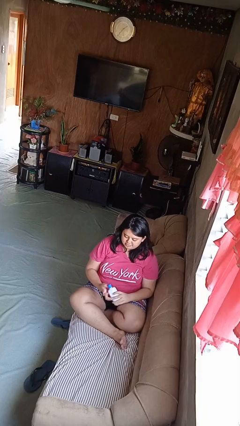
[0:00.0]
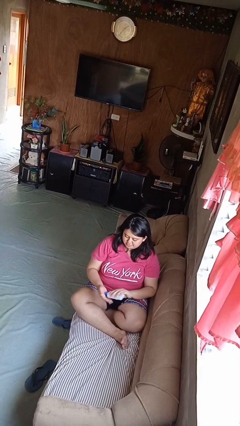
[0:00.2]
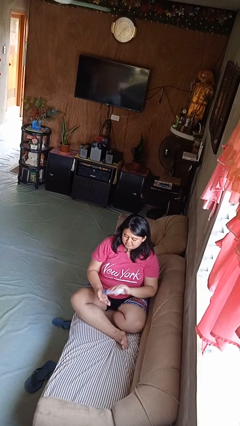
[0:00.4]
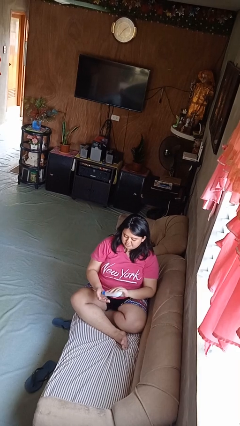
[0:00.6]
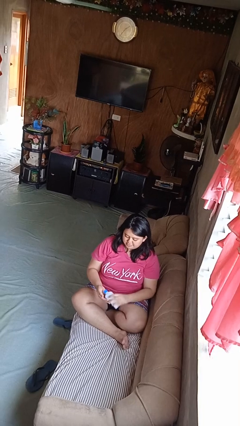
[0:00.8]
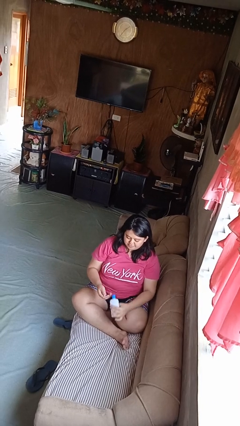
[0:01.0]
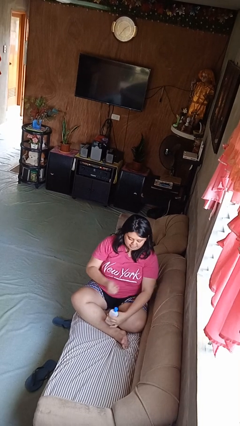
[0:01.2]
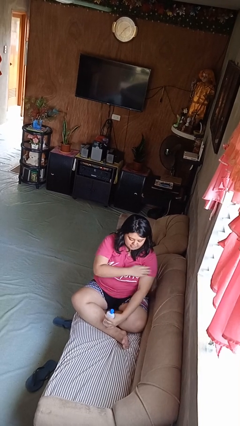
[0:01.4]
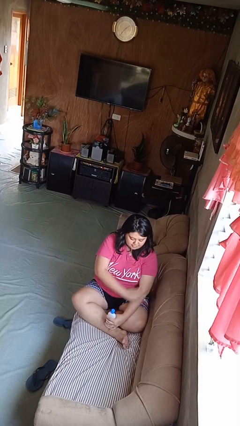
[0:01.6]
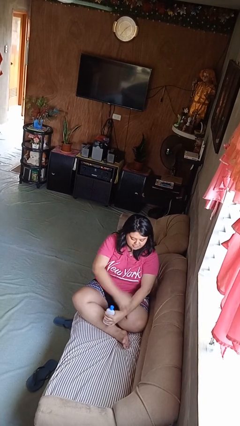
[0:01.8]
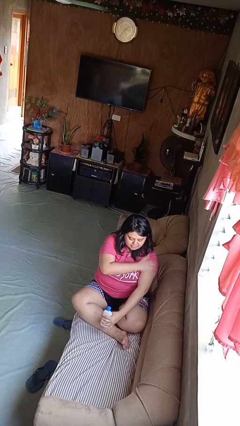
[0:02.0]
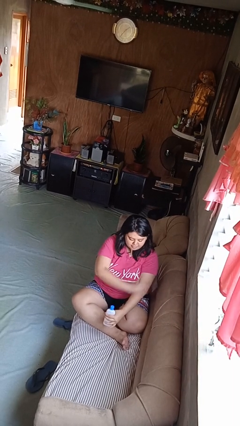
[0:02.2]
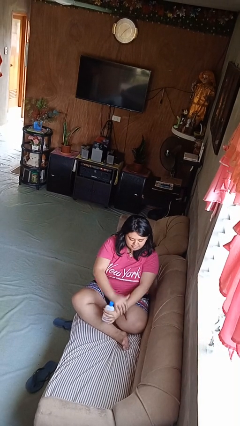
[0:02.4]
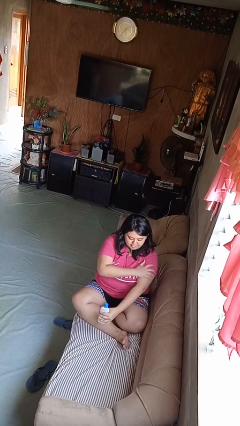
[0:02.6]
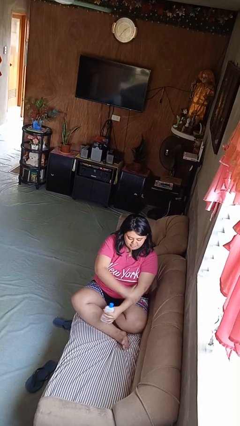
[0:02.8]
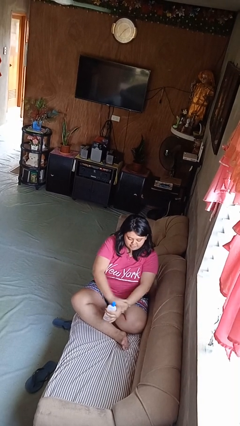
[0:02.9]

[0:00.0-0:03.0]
person applies sunscreen

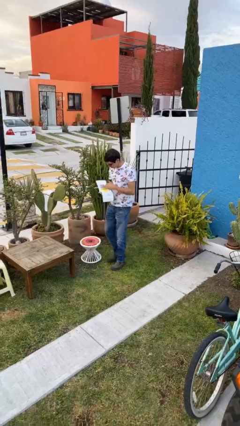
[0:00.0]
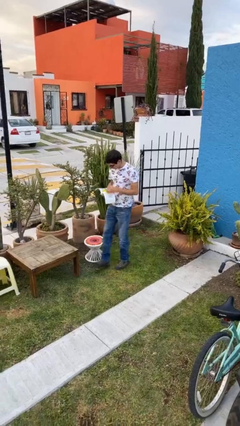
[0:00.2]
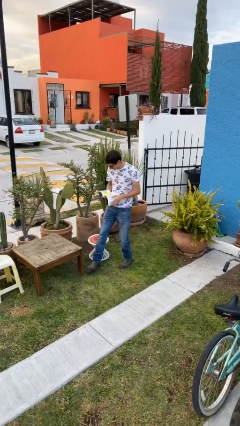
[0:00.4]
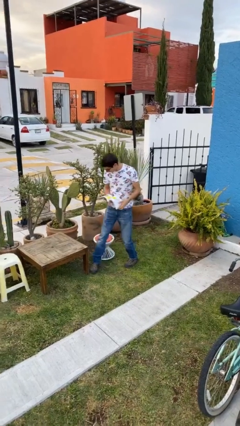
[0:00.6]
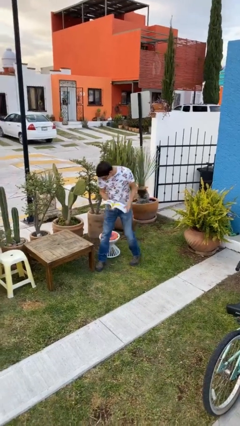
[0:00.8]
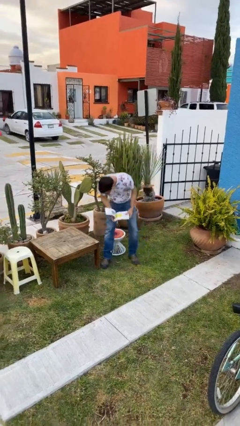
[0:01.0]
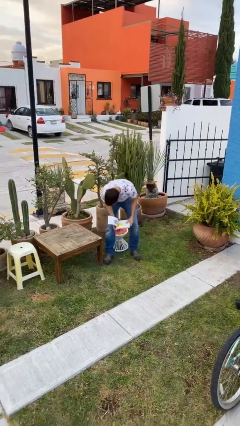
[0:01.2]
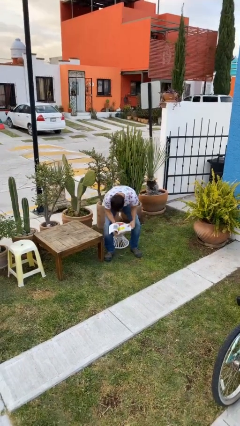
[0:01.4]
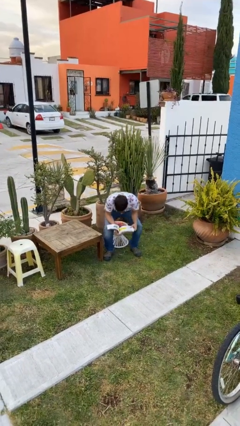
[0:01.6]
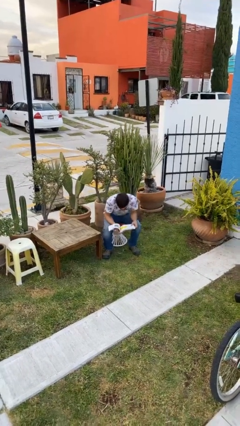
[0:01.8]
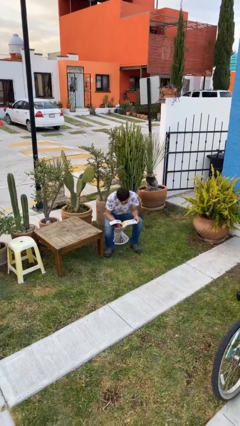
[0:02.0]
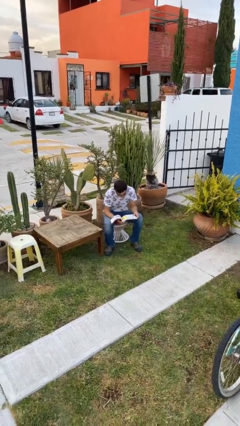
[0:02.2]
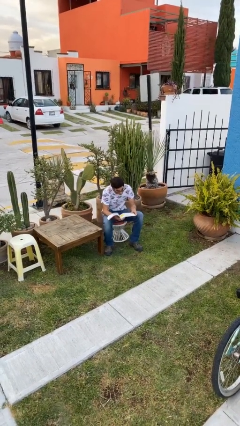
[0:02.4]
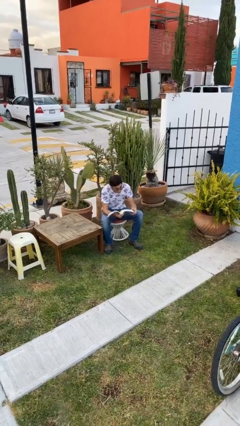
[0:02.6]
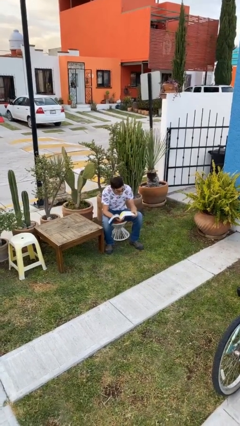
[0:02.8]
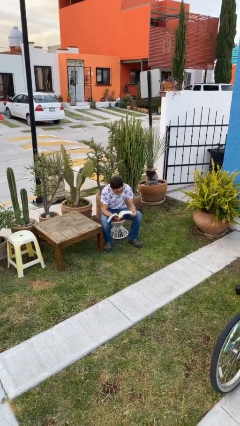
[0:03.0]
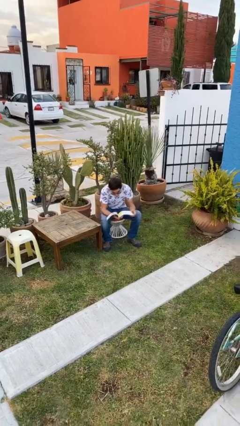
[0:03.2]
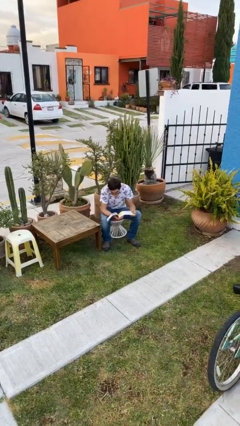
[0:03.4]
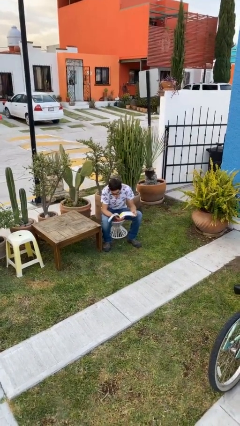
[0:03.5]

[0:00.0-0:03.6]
person sits down

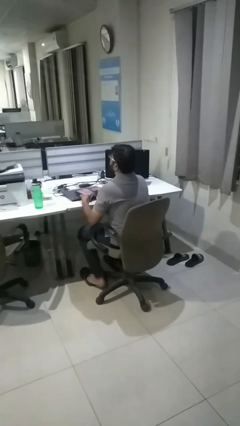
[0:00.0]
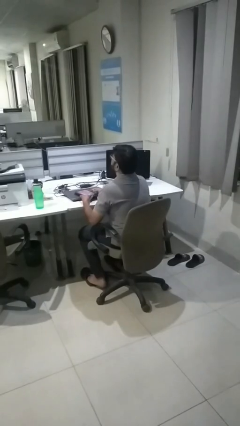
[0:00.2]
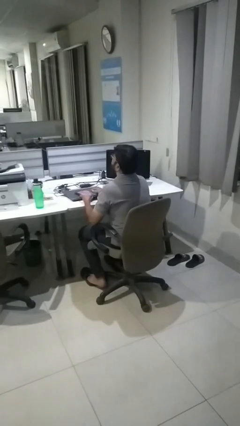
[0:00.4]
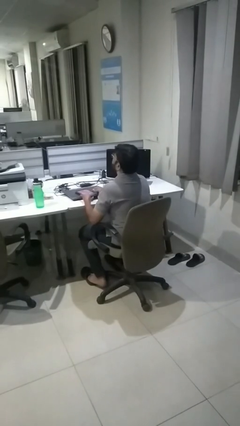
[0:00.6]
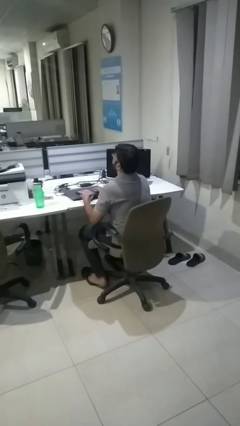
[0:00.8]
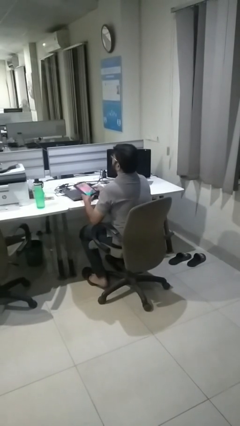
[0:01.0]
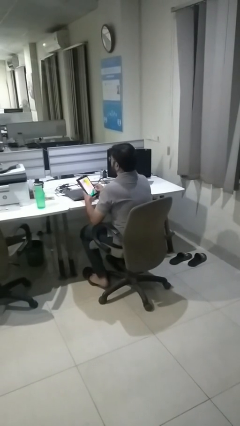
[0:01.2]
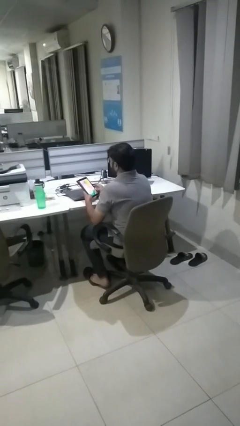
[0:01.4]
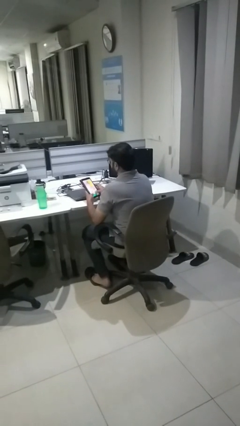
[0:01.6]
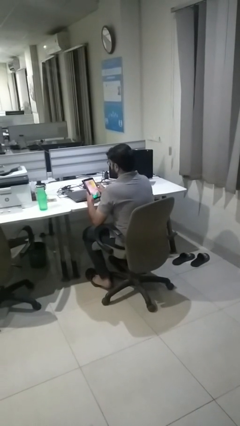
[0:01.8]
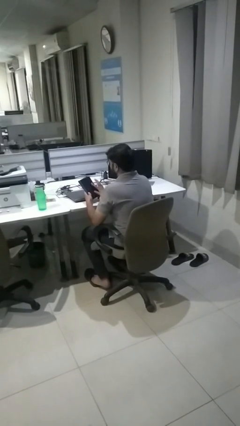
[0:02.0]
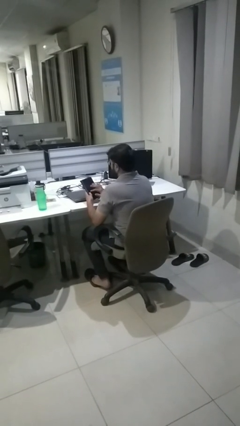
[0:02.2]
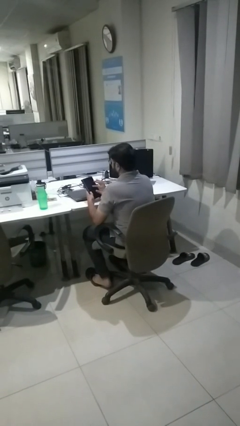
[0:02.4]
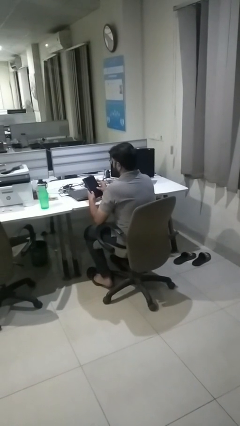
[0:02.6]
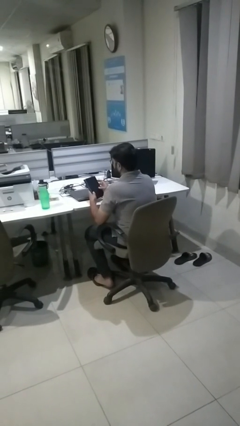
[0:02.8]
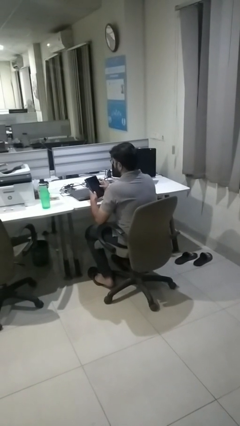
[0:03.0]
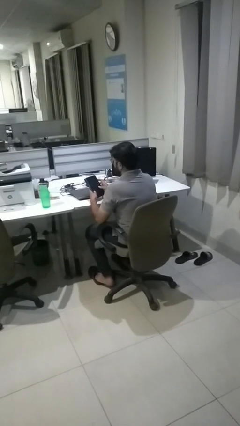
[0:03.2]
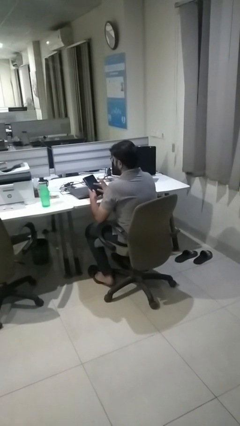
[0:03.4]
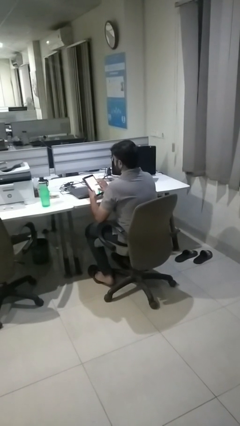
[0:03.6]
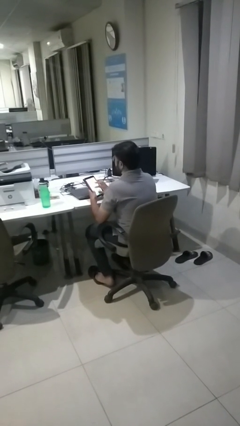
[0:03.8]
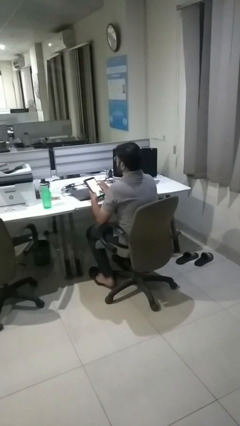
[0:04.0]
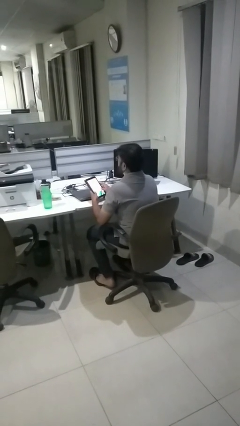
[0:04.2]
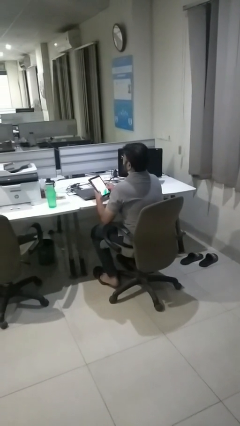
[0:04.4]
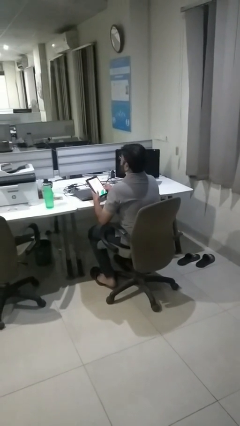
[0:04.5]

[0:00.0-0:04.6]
person interacts with tablet

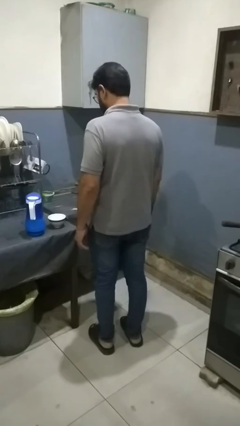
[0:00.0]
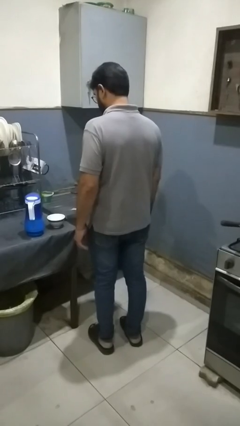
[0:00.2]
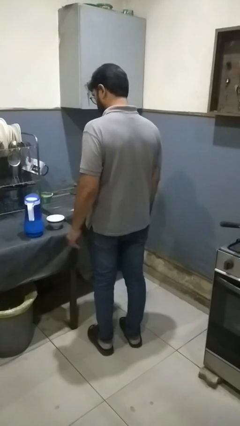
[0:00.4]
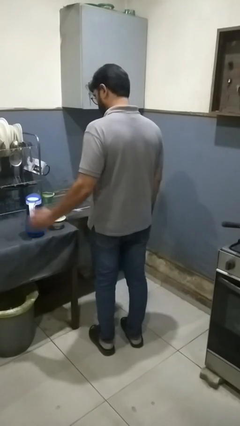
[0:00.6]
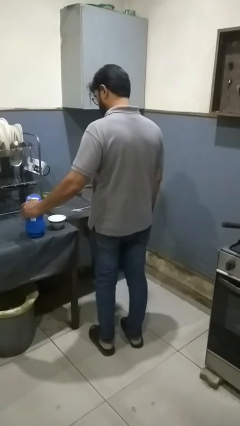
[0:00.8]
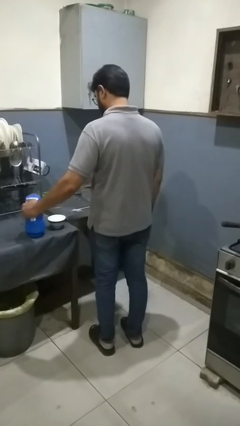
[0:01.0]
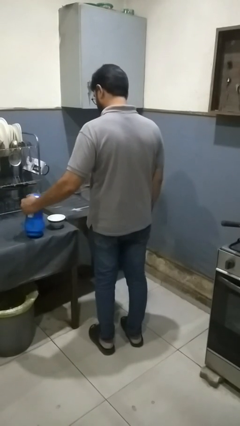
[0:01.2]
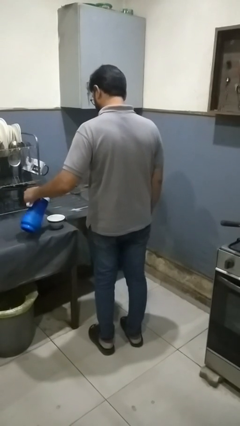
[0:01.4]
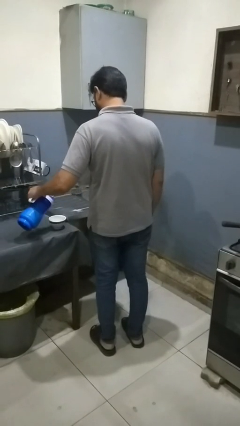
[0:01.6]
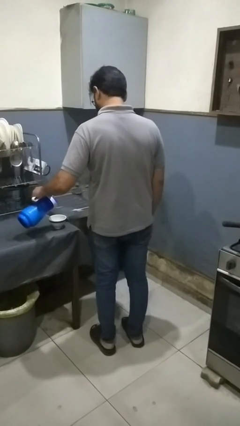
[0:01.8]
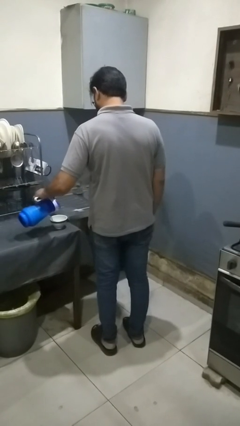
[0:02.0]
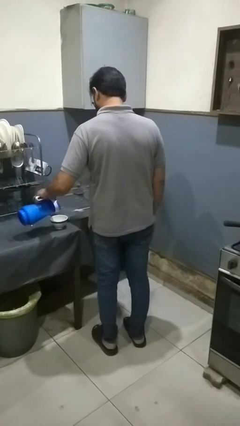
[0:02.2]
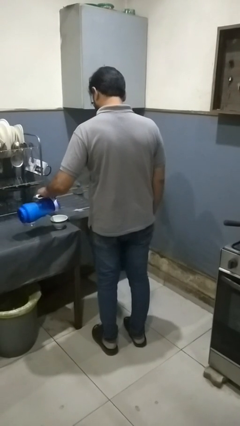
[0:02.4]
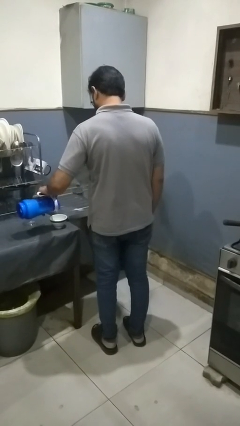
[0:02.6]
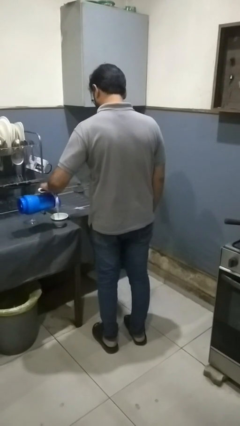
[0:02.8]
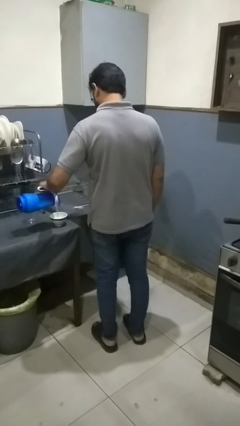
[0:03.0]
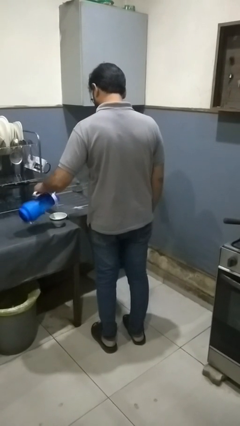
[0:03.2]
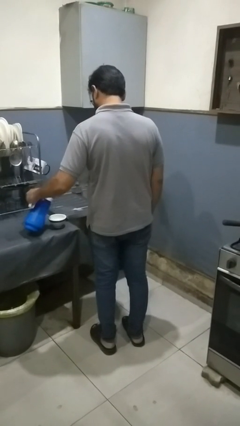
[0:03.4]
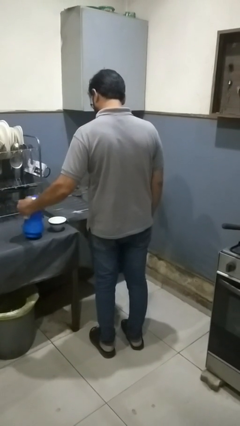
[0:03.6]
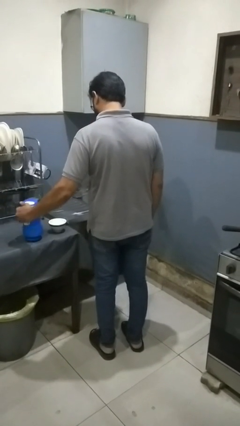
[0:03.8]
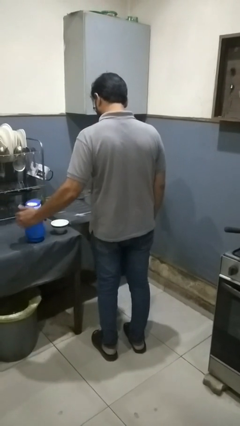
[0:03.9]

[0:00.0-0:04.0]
person pours into bowl

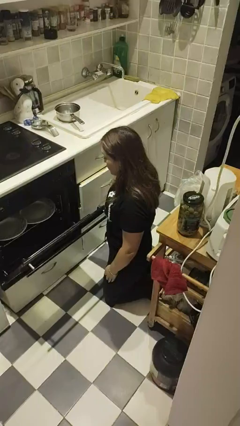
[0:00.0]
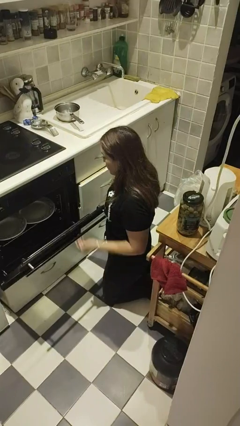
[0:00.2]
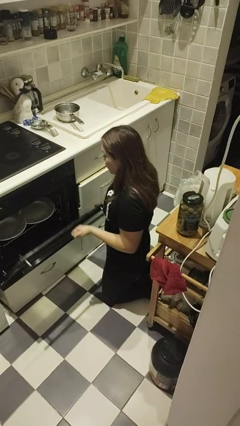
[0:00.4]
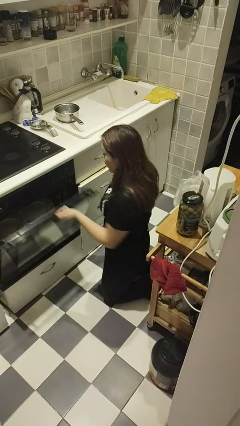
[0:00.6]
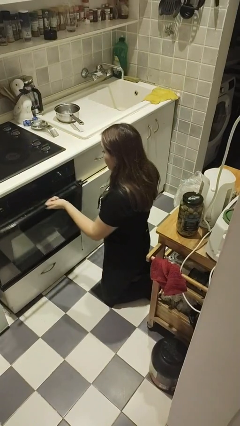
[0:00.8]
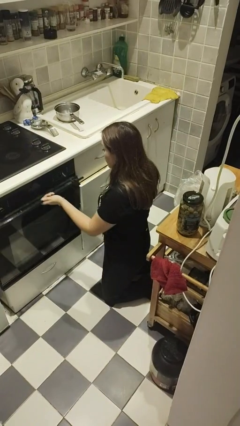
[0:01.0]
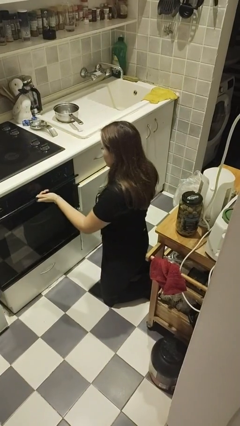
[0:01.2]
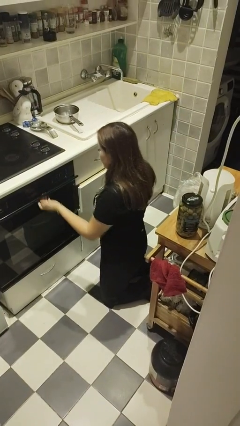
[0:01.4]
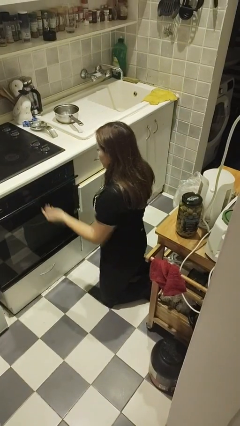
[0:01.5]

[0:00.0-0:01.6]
person closes oven door

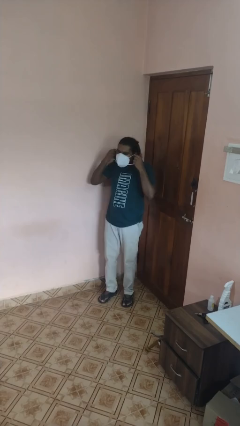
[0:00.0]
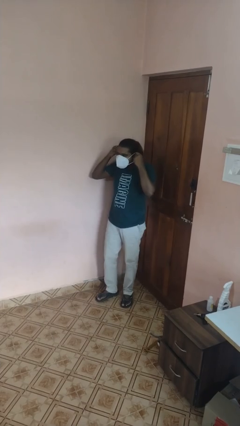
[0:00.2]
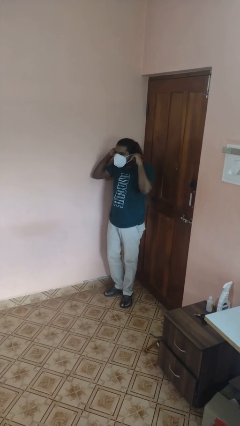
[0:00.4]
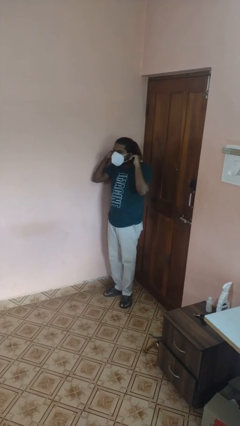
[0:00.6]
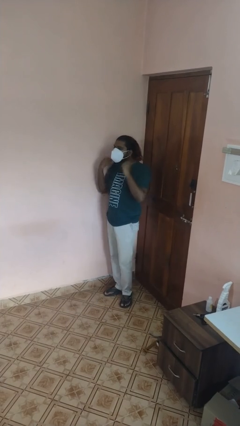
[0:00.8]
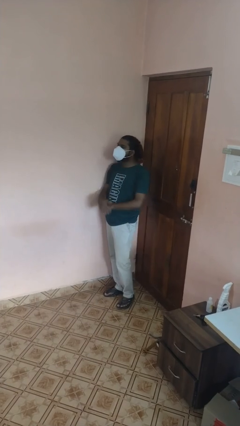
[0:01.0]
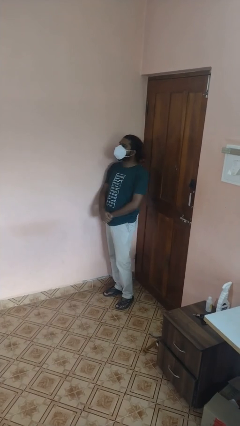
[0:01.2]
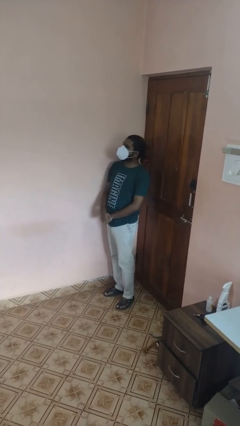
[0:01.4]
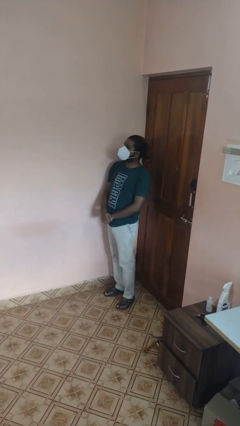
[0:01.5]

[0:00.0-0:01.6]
person puts on facemask
